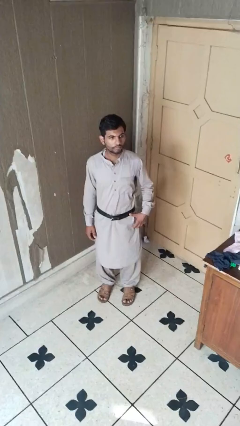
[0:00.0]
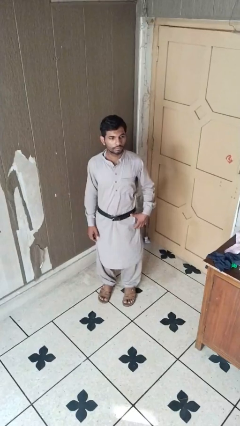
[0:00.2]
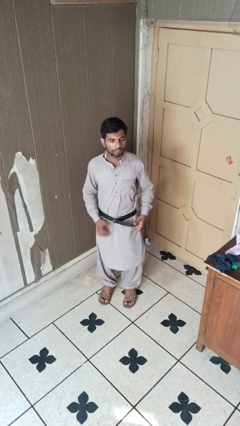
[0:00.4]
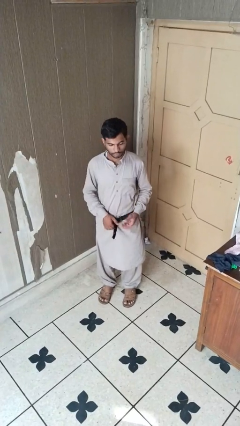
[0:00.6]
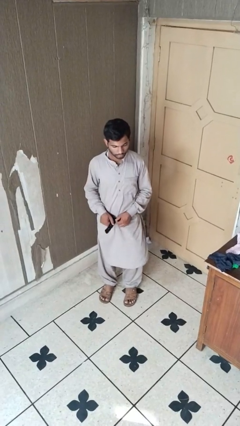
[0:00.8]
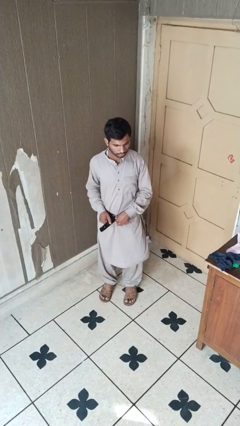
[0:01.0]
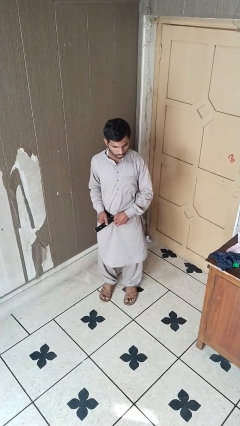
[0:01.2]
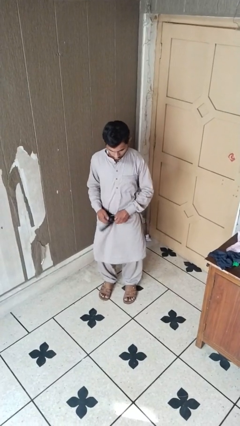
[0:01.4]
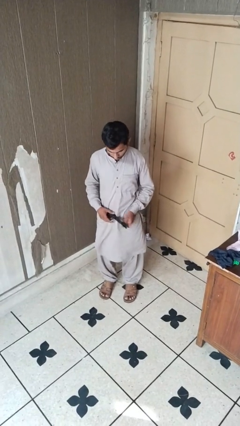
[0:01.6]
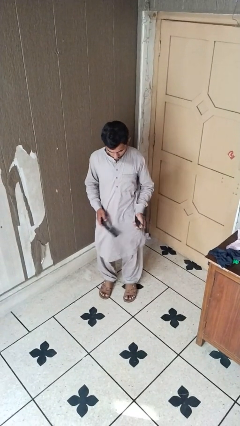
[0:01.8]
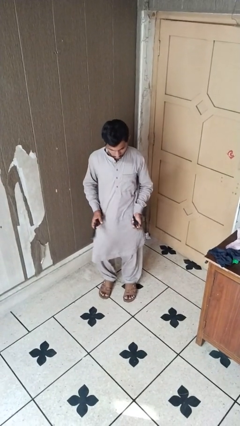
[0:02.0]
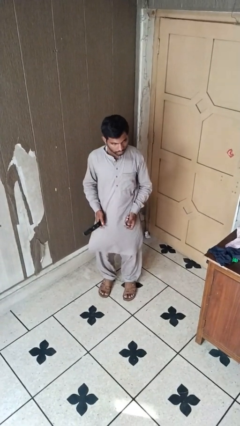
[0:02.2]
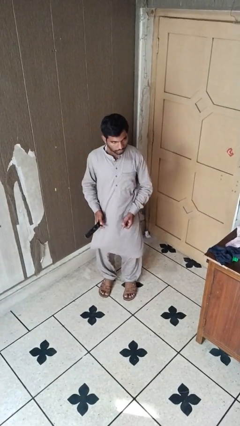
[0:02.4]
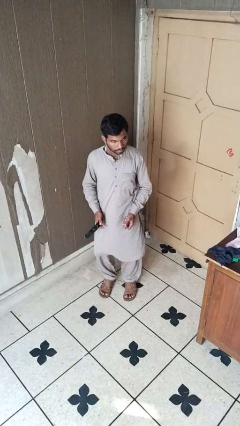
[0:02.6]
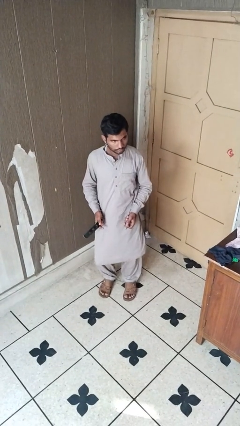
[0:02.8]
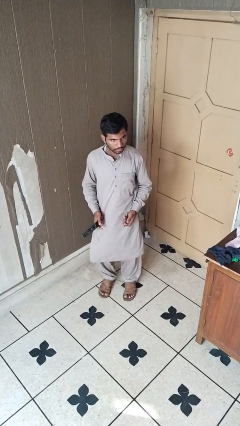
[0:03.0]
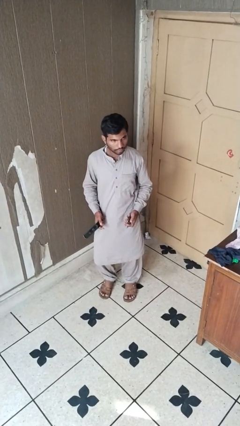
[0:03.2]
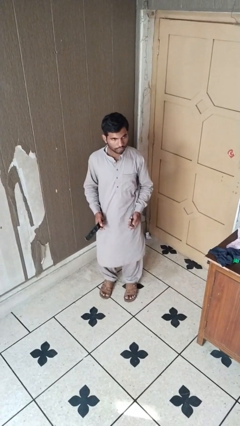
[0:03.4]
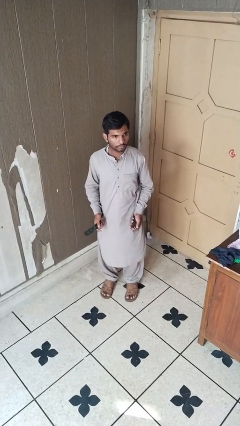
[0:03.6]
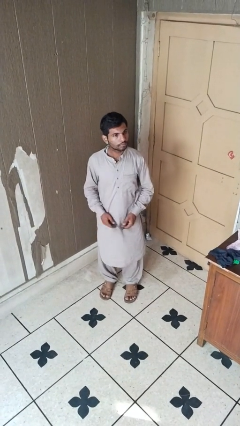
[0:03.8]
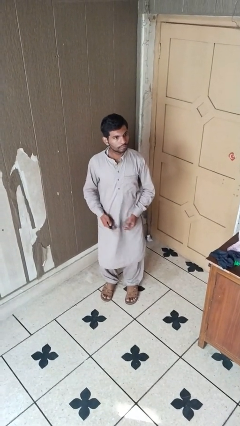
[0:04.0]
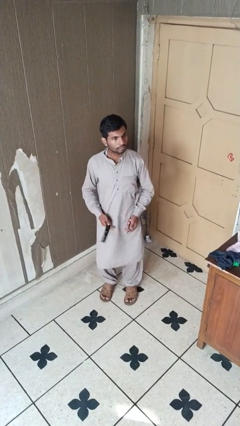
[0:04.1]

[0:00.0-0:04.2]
person takes off belt

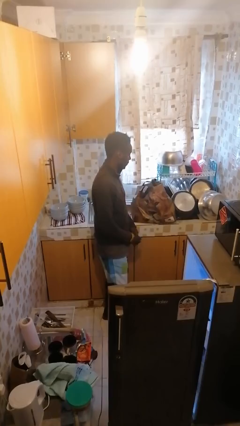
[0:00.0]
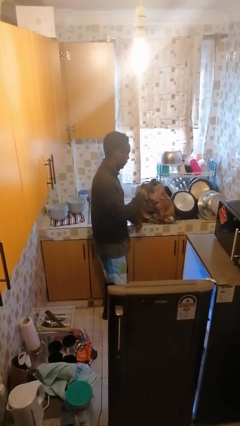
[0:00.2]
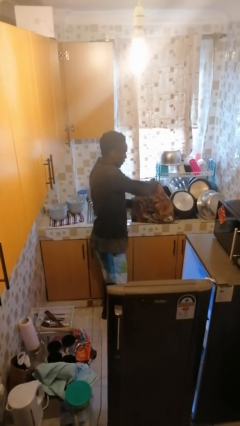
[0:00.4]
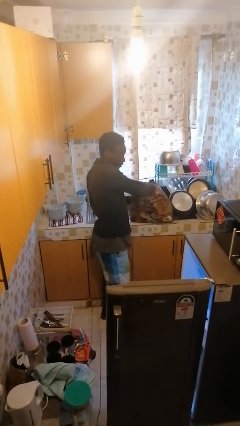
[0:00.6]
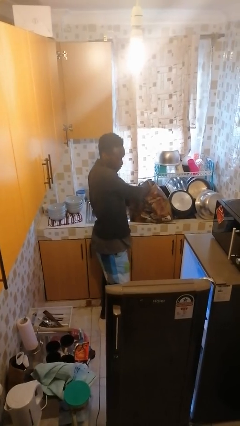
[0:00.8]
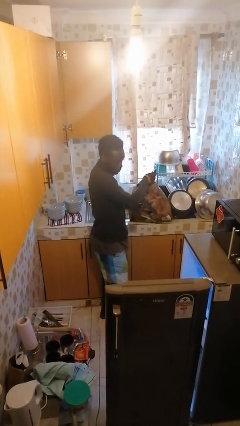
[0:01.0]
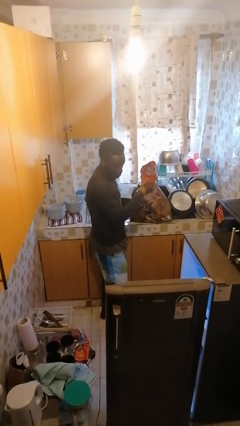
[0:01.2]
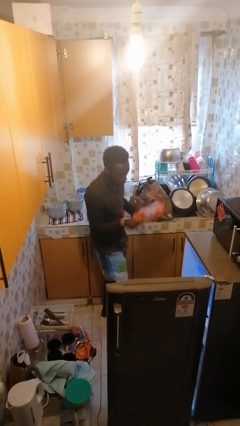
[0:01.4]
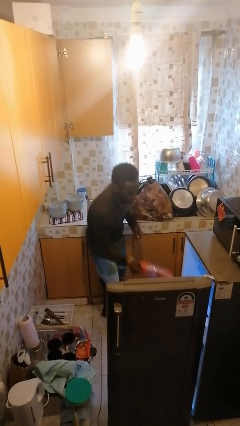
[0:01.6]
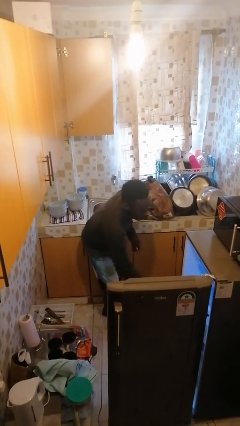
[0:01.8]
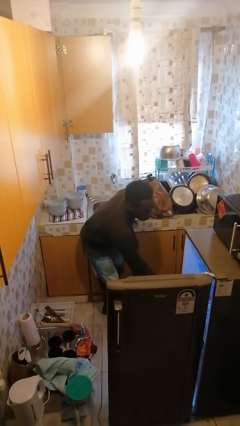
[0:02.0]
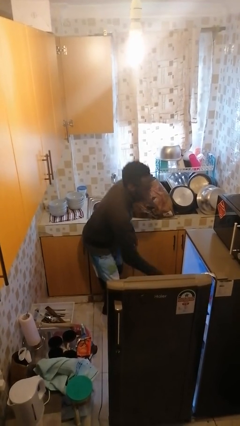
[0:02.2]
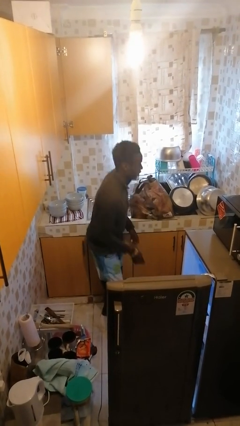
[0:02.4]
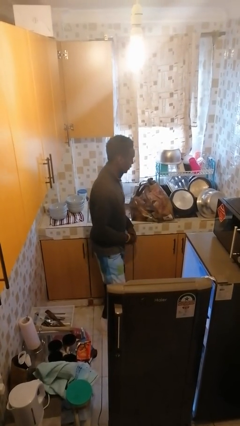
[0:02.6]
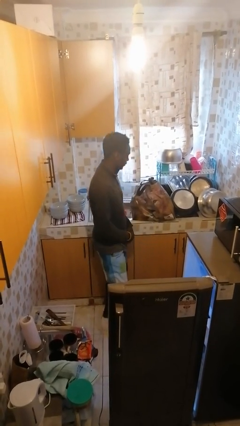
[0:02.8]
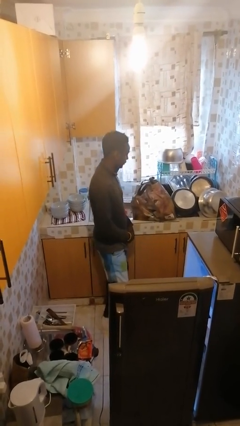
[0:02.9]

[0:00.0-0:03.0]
person loads groceries into refrigerator

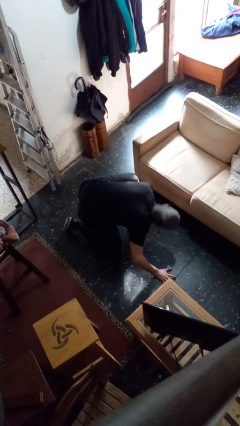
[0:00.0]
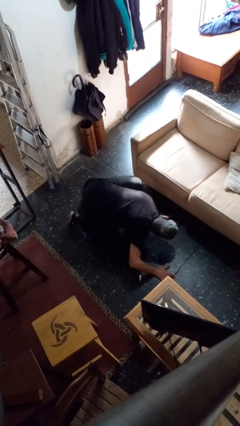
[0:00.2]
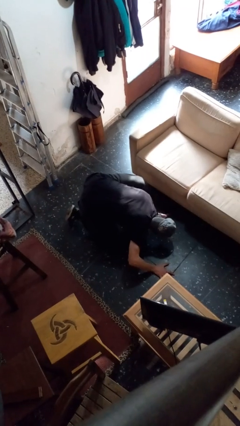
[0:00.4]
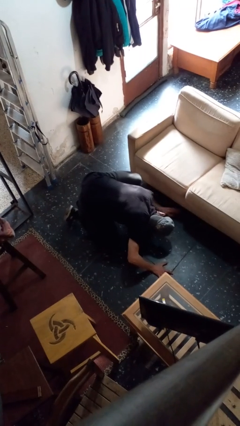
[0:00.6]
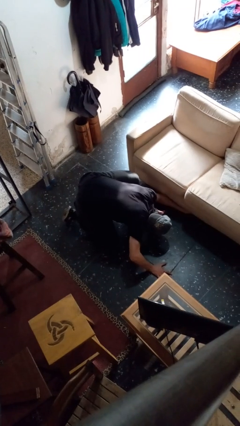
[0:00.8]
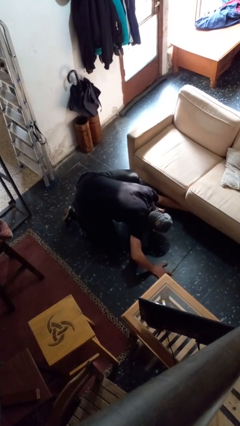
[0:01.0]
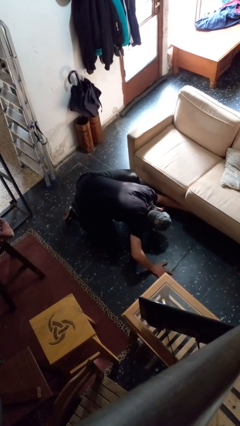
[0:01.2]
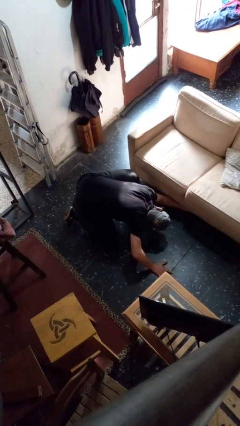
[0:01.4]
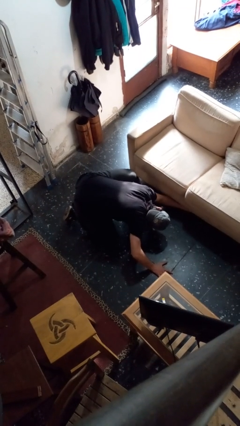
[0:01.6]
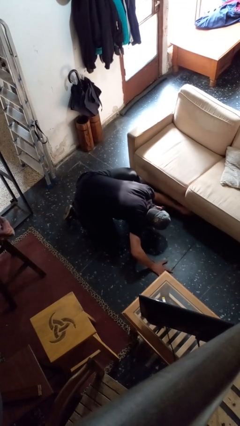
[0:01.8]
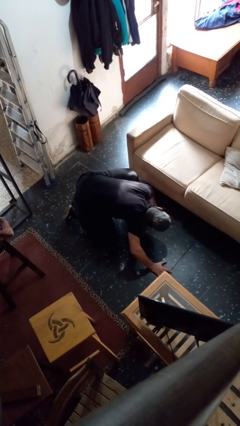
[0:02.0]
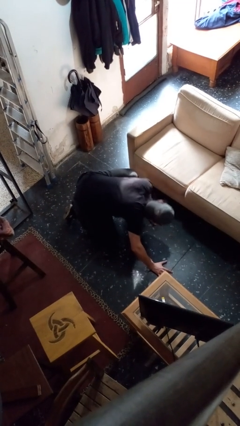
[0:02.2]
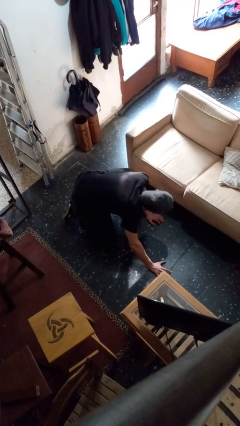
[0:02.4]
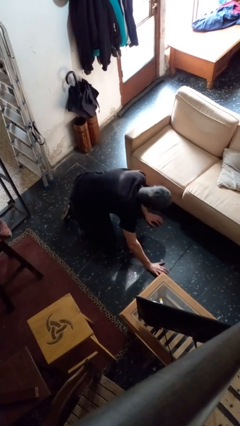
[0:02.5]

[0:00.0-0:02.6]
person searches under couch

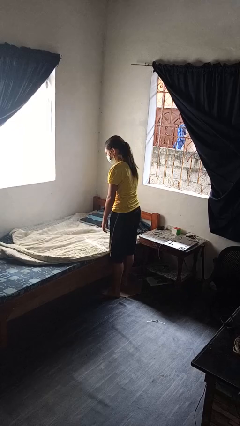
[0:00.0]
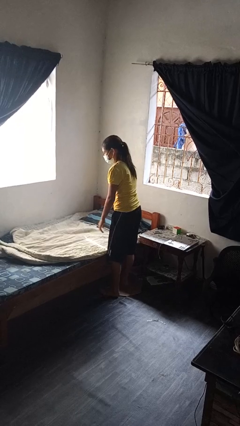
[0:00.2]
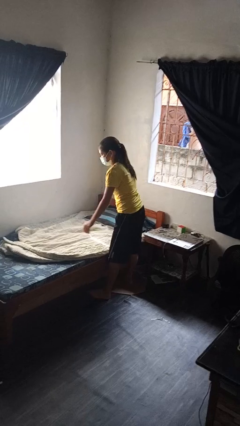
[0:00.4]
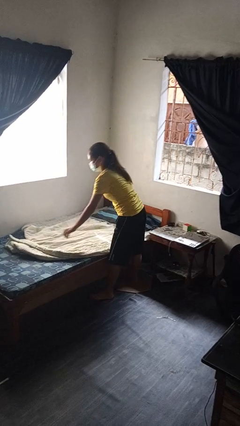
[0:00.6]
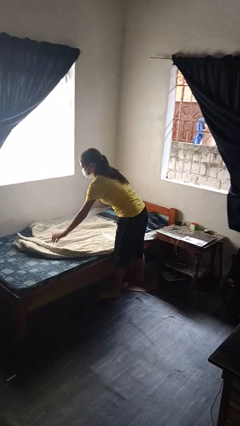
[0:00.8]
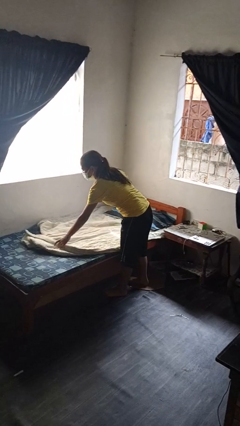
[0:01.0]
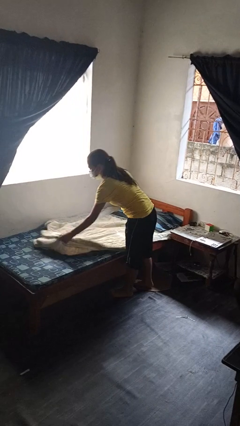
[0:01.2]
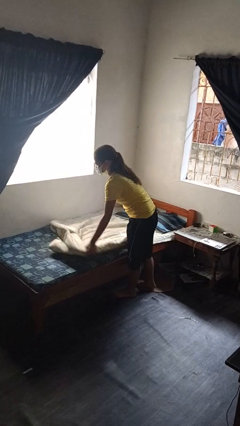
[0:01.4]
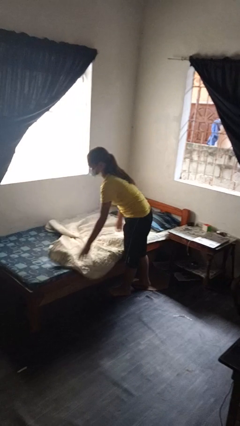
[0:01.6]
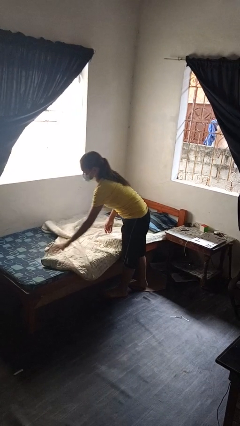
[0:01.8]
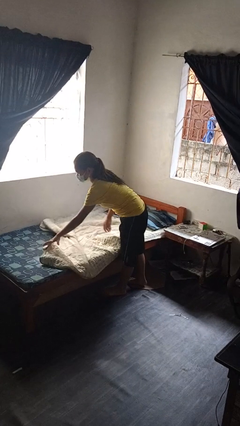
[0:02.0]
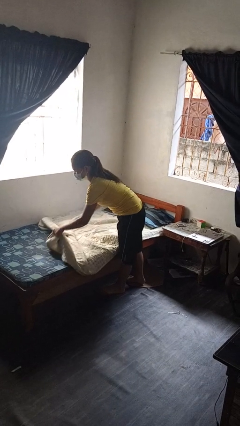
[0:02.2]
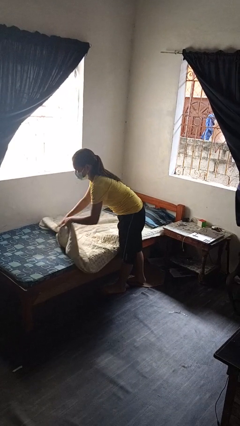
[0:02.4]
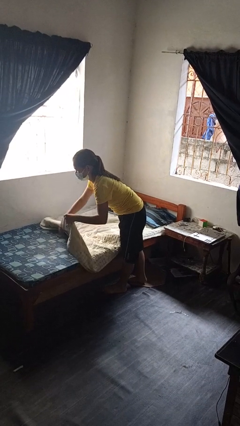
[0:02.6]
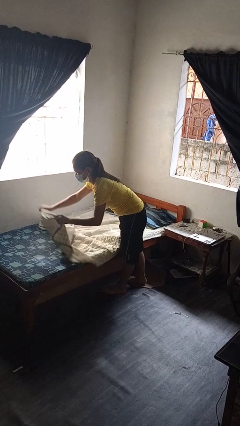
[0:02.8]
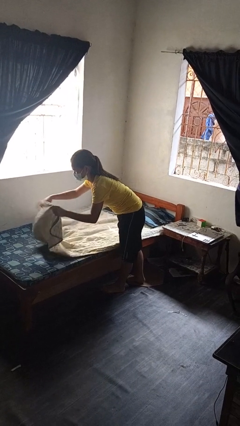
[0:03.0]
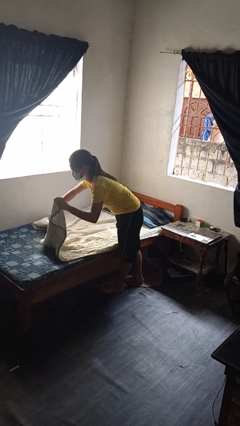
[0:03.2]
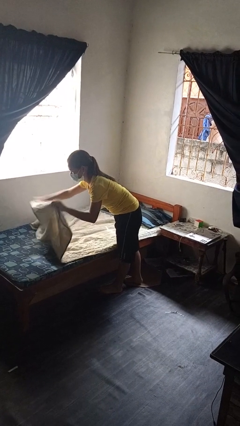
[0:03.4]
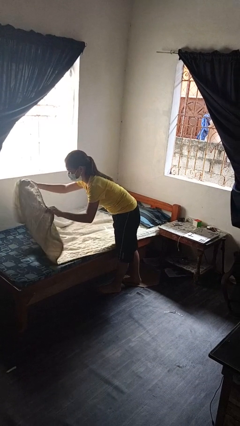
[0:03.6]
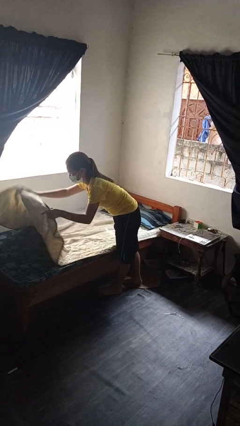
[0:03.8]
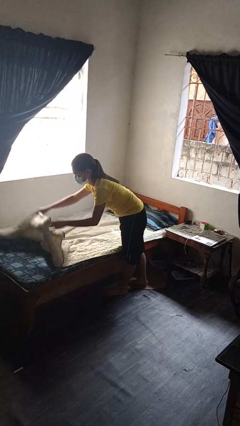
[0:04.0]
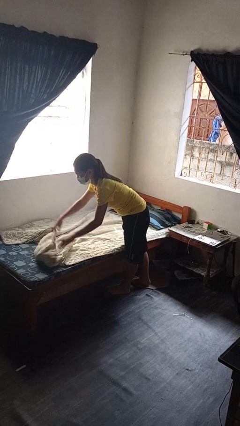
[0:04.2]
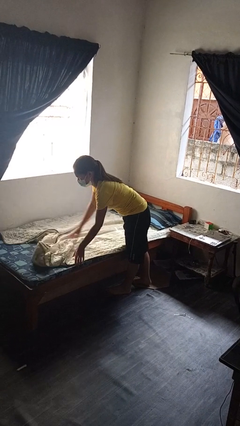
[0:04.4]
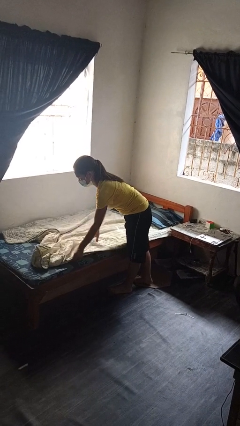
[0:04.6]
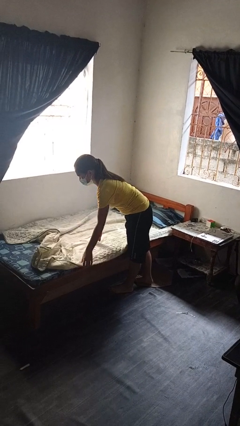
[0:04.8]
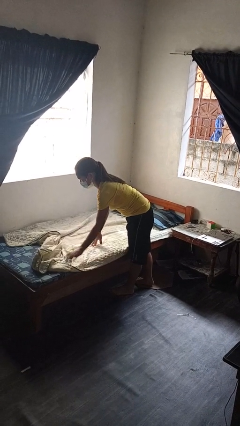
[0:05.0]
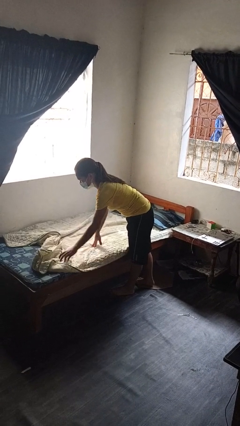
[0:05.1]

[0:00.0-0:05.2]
person makes bed

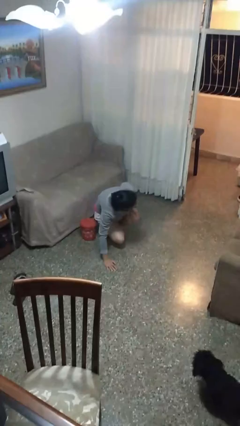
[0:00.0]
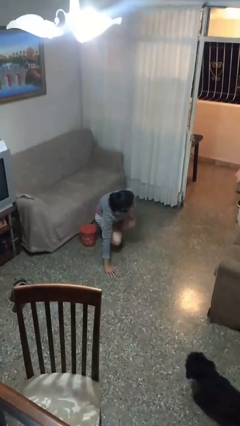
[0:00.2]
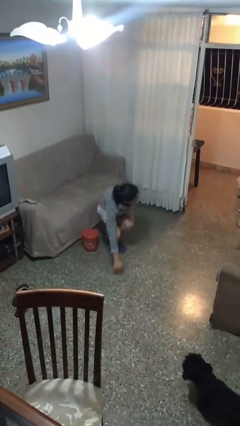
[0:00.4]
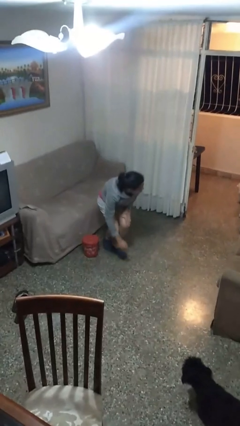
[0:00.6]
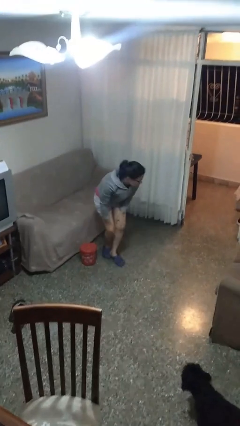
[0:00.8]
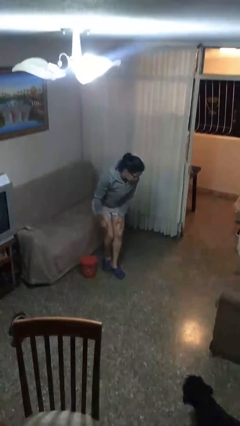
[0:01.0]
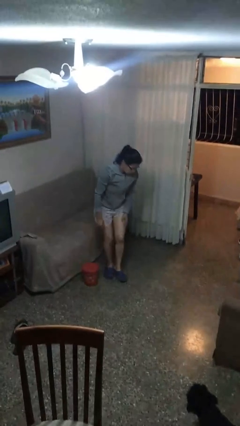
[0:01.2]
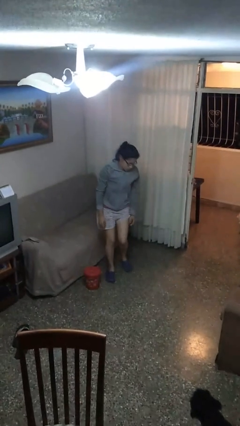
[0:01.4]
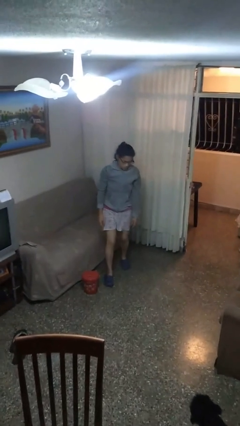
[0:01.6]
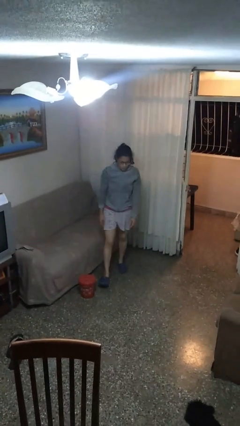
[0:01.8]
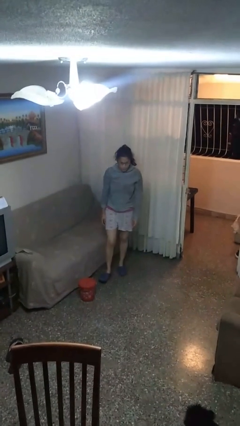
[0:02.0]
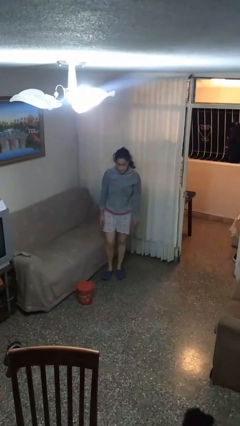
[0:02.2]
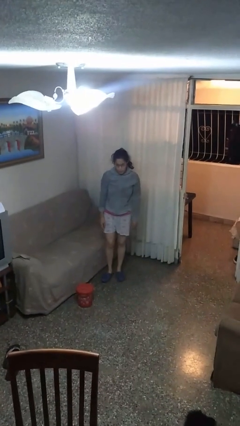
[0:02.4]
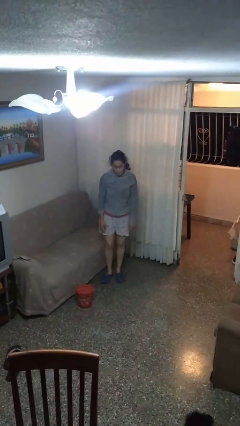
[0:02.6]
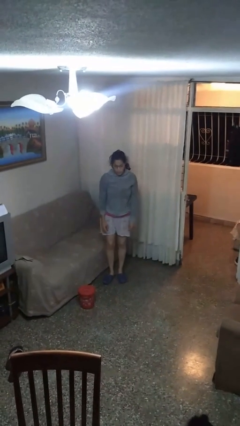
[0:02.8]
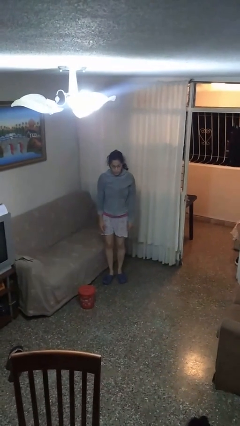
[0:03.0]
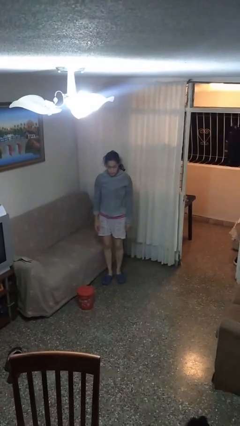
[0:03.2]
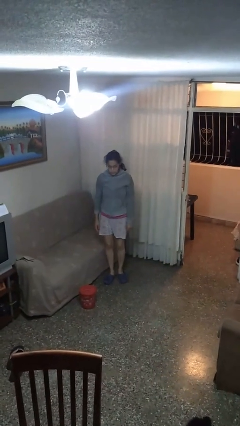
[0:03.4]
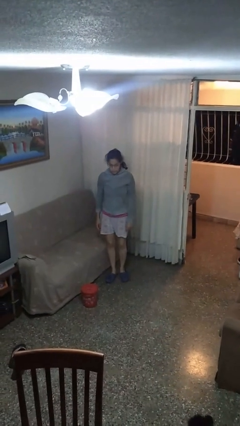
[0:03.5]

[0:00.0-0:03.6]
person stands up from floor
